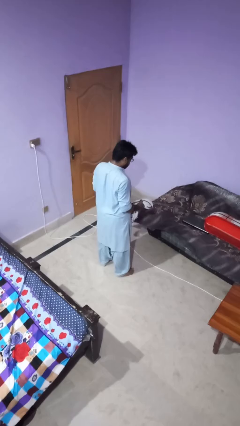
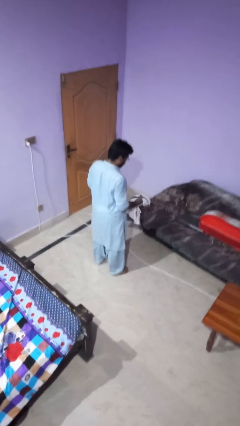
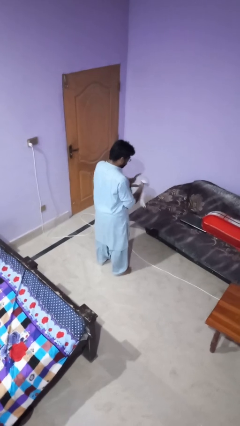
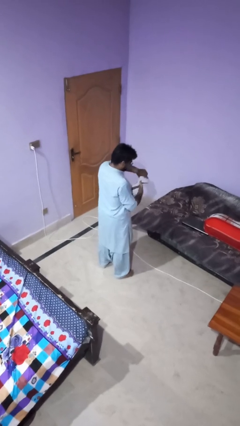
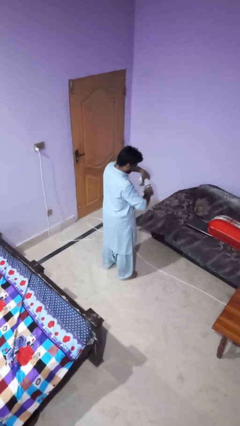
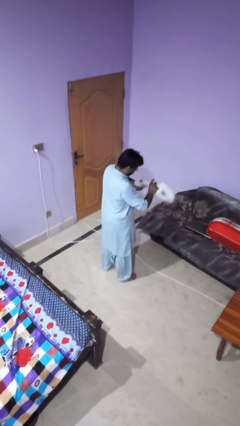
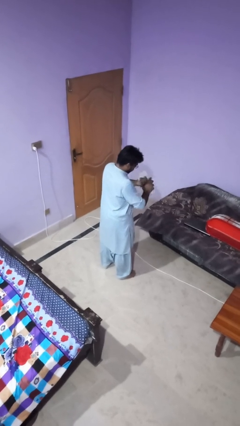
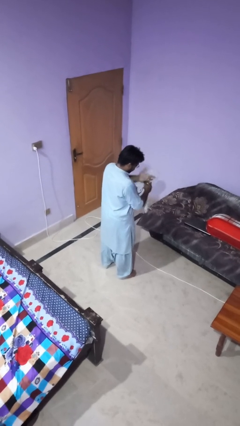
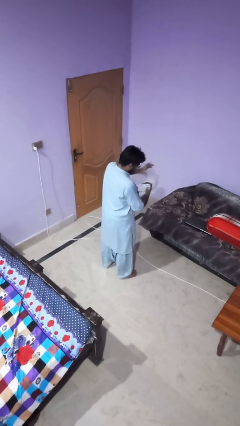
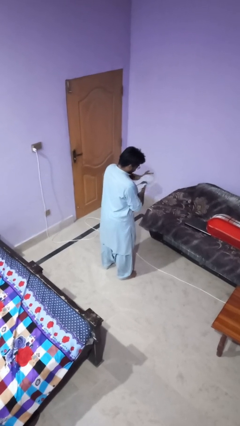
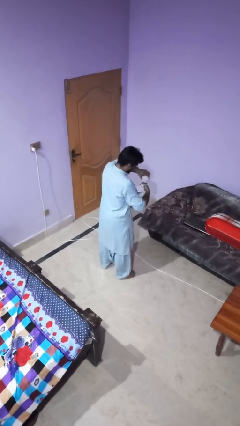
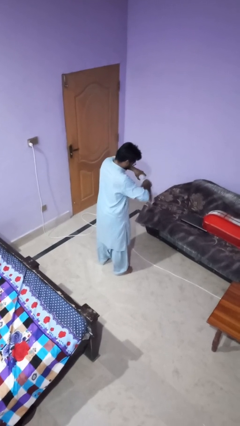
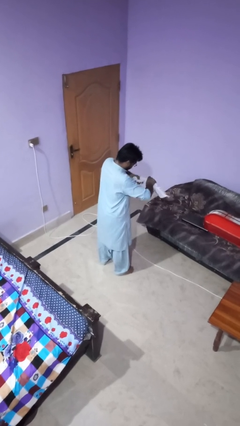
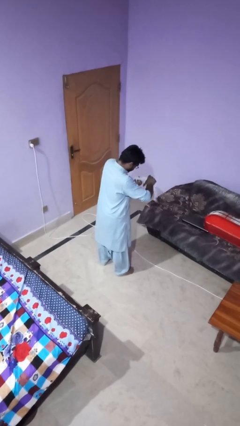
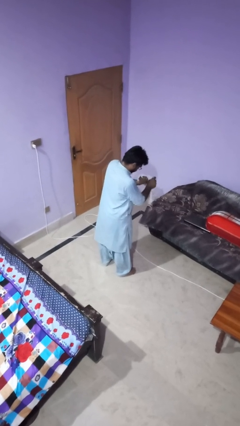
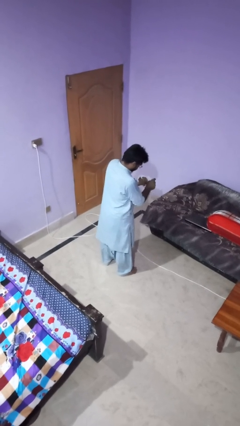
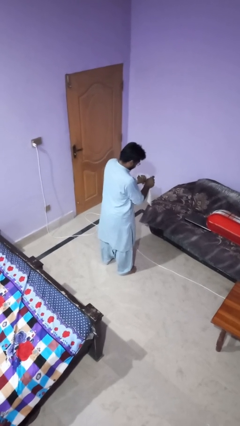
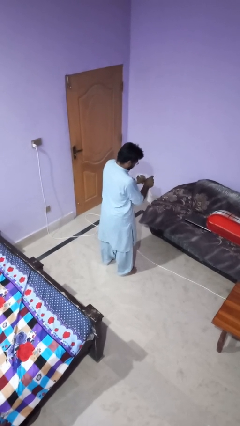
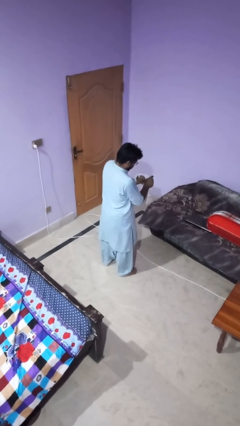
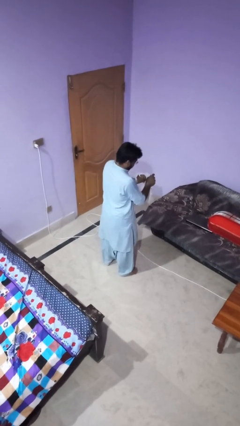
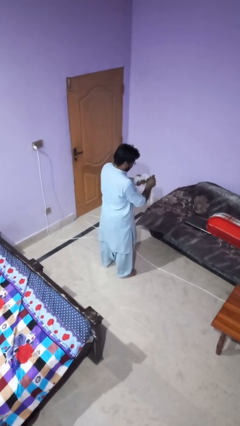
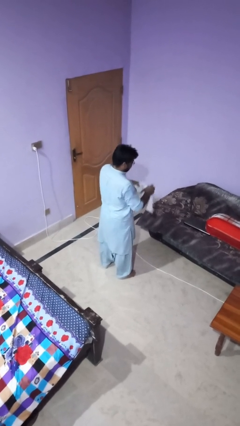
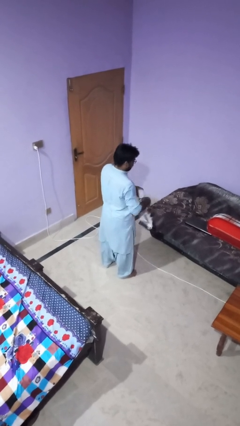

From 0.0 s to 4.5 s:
person squeezes object

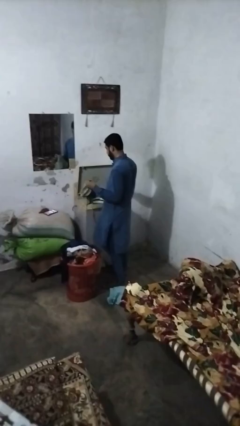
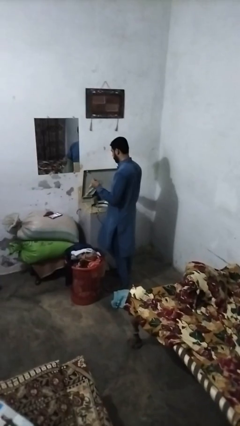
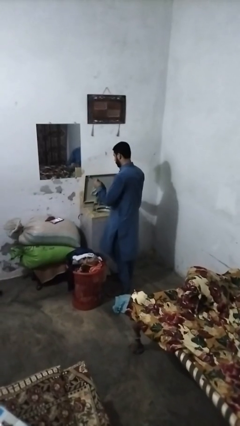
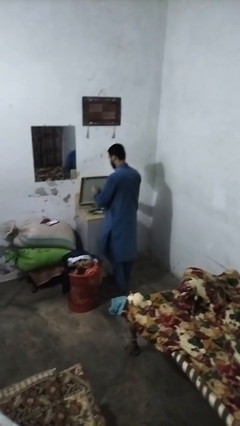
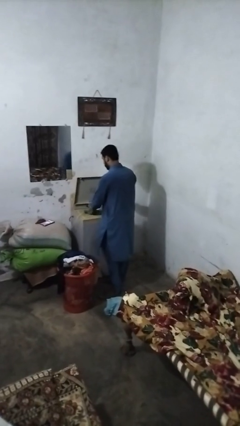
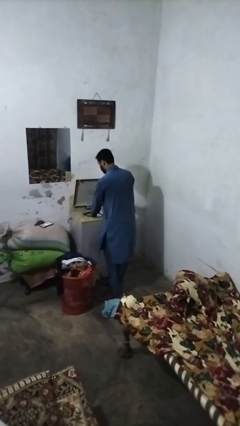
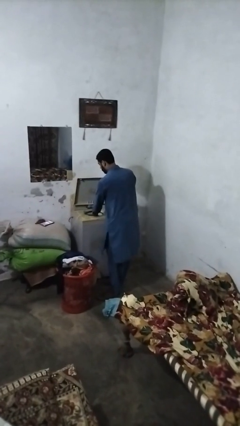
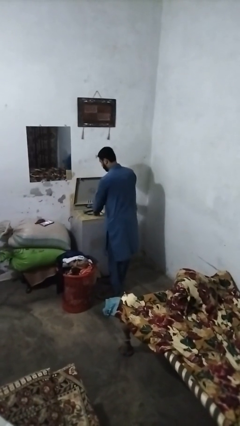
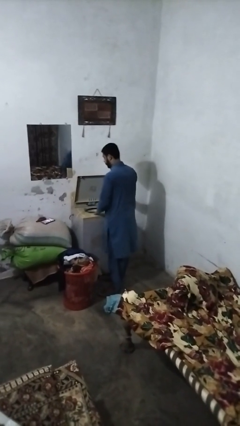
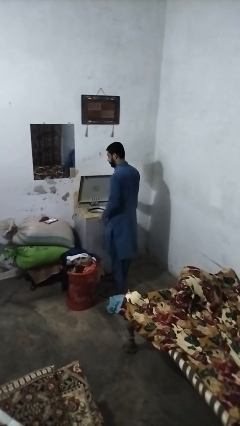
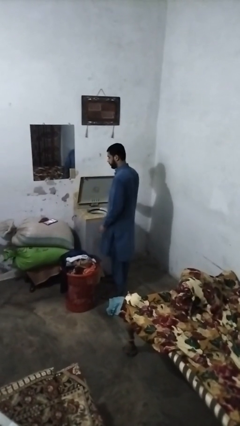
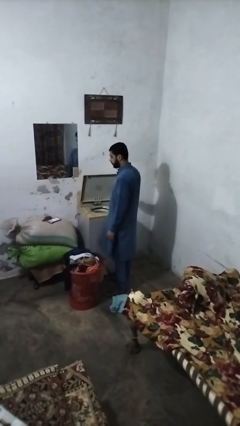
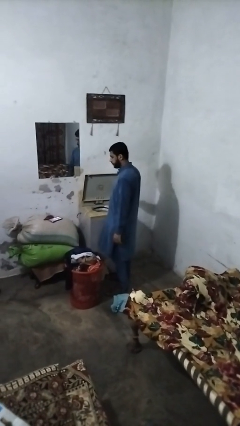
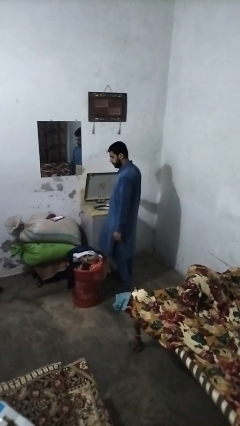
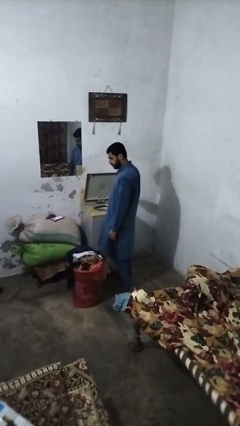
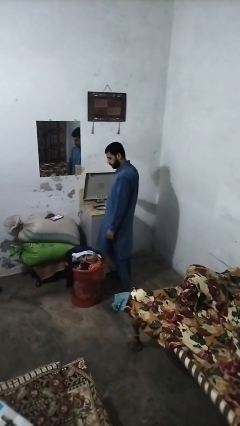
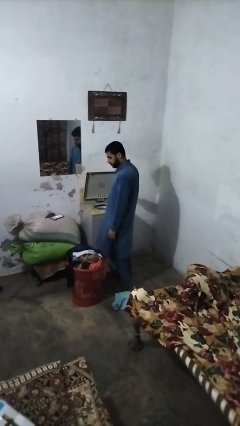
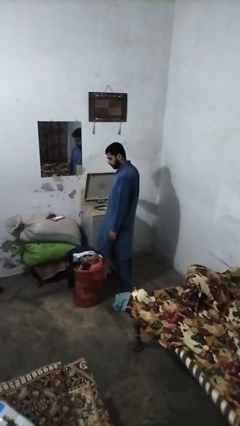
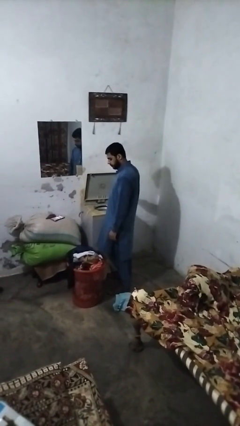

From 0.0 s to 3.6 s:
person loads clotheswasher

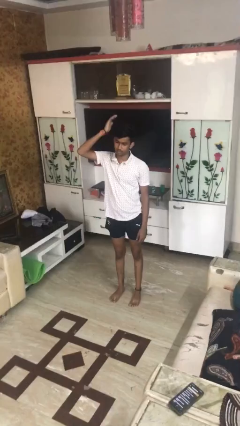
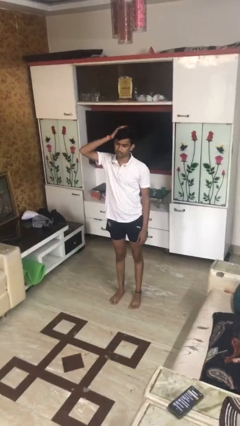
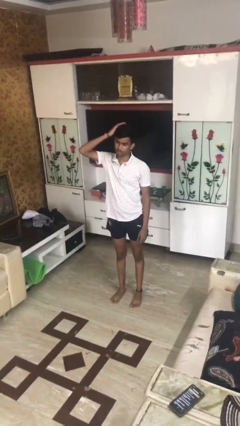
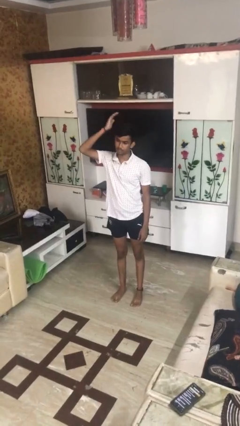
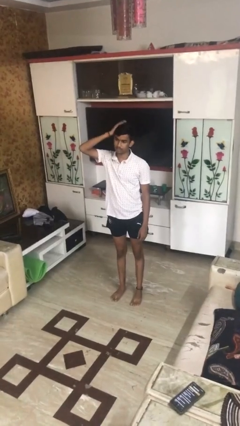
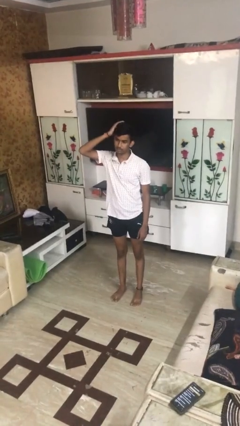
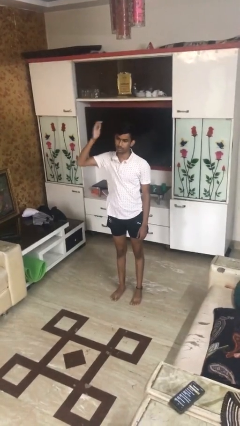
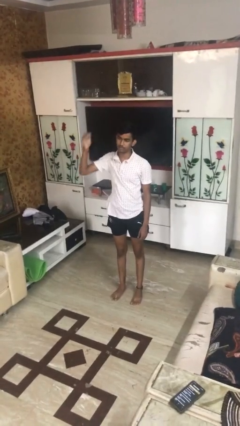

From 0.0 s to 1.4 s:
person pats head

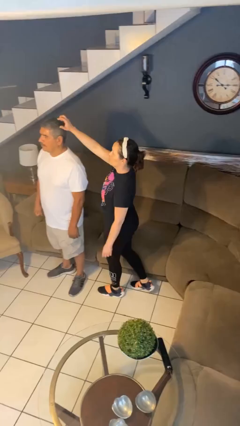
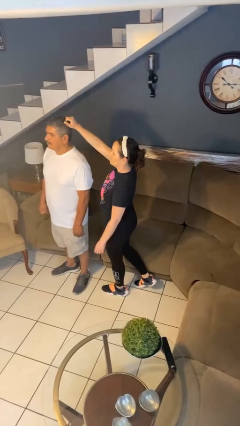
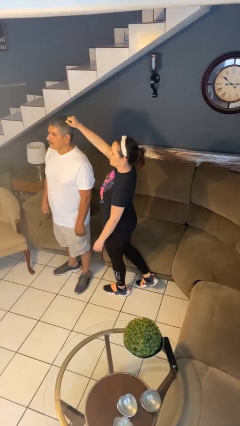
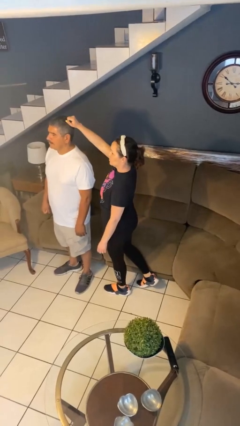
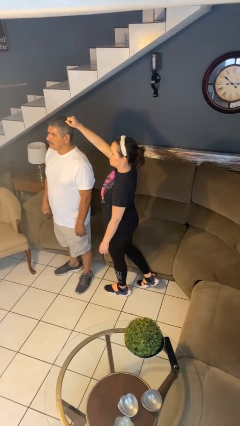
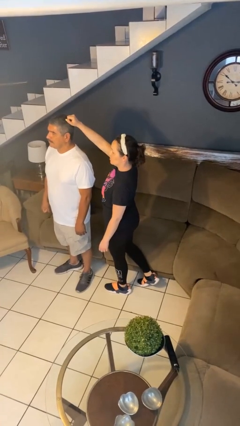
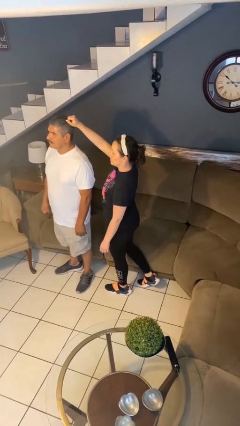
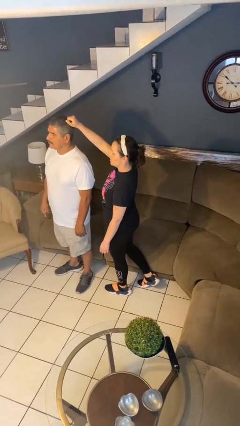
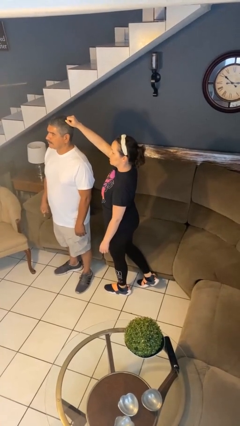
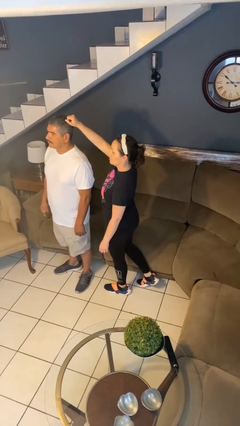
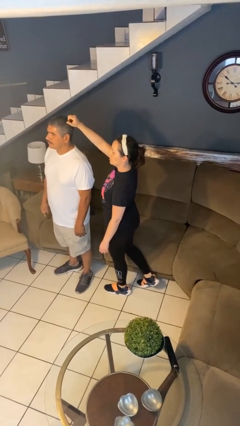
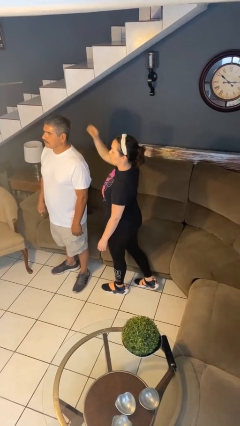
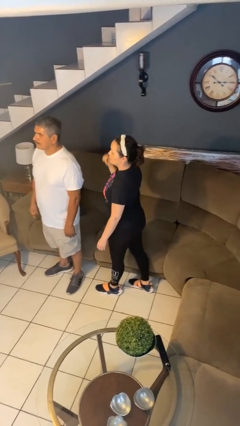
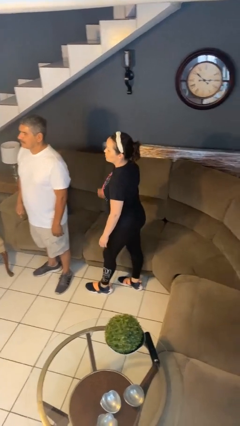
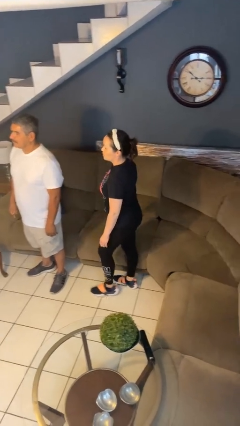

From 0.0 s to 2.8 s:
person grabs person by hair

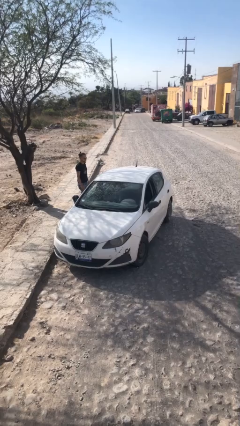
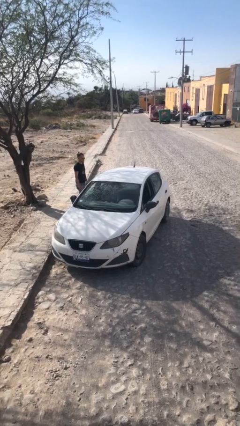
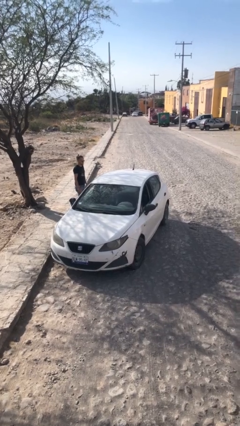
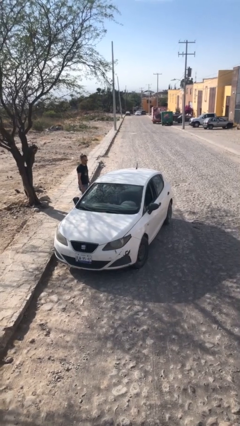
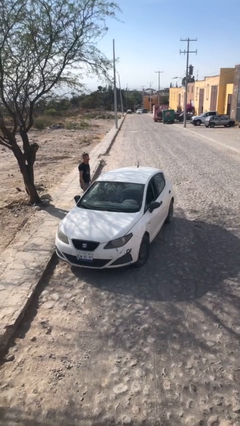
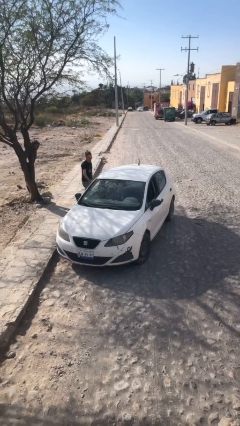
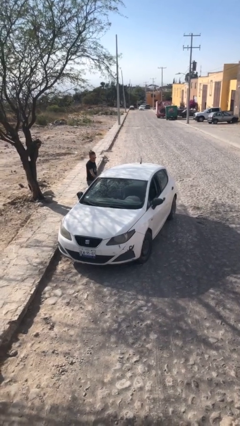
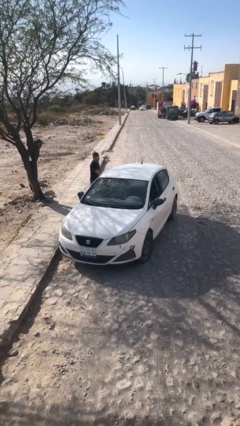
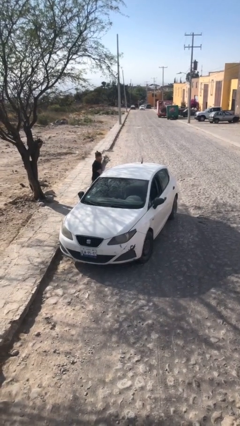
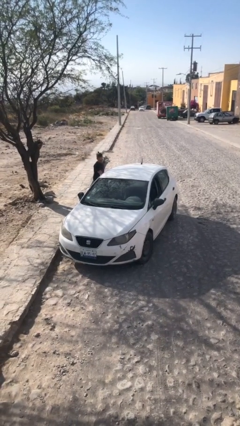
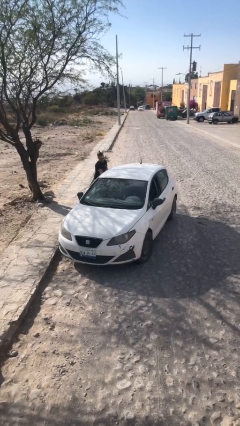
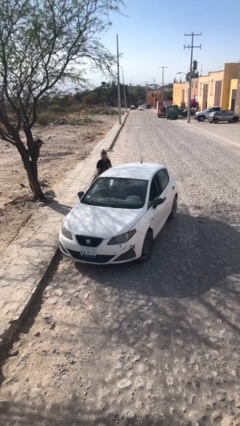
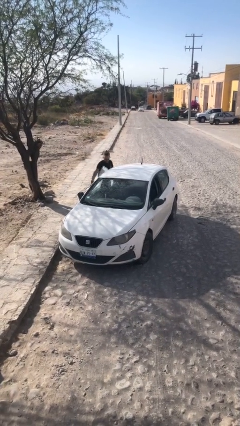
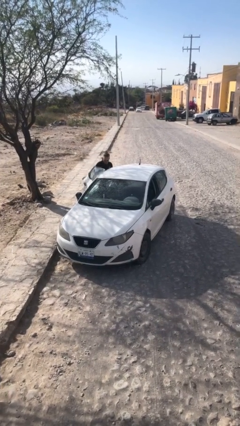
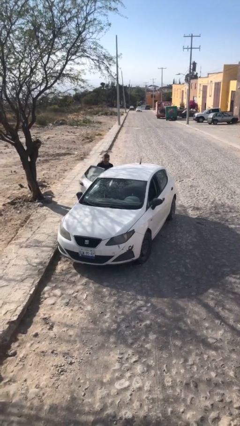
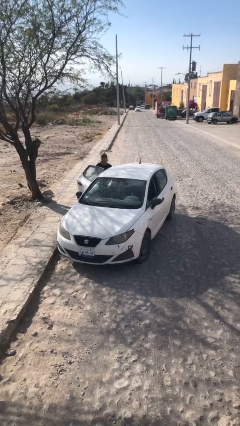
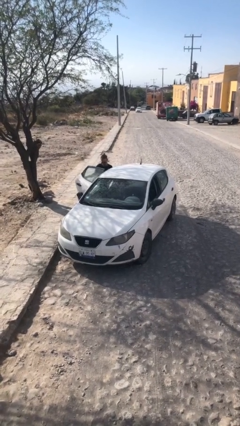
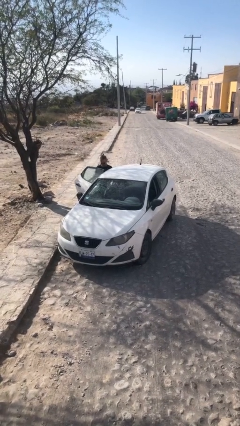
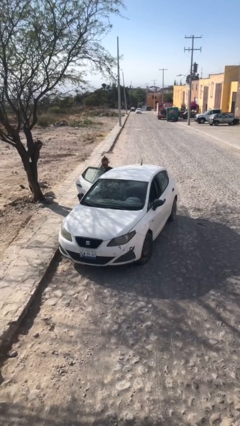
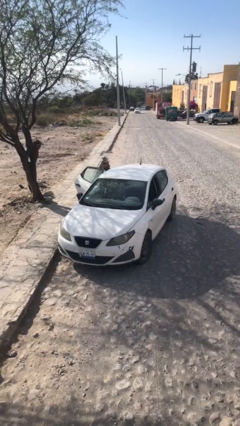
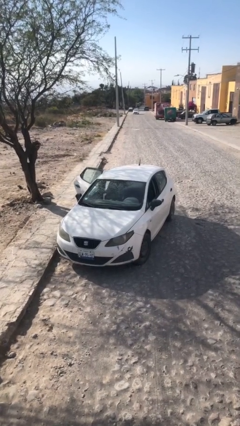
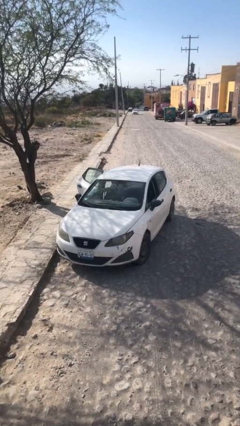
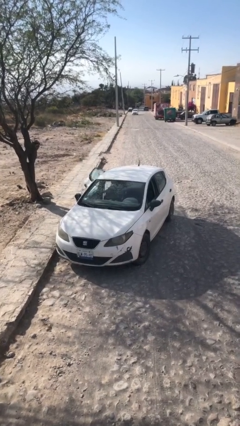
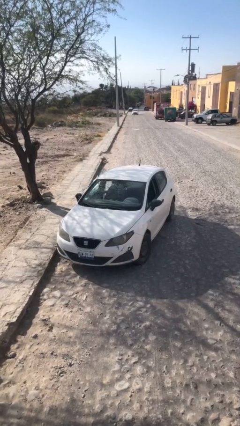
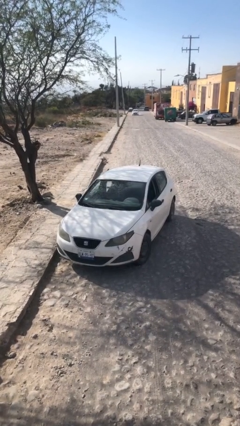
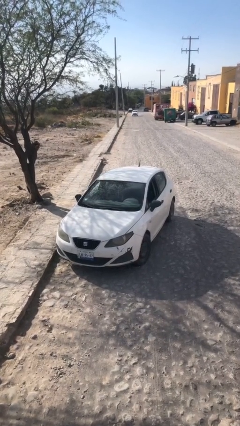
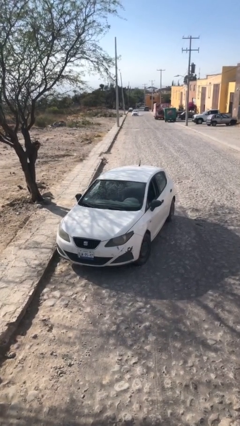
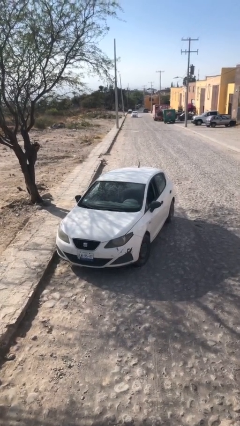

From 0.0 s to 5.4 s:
car picks up person
